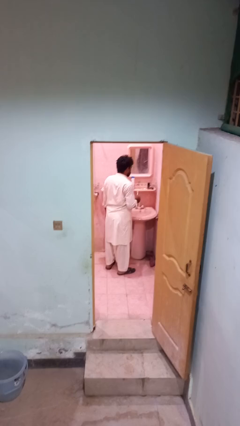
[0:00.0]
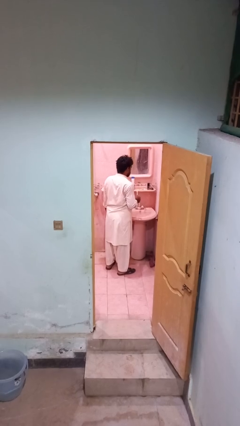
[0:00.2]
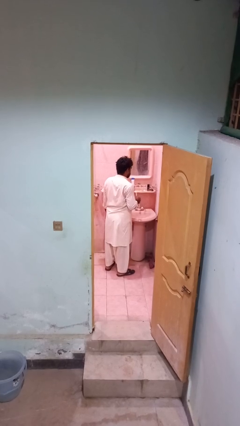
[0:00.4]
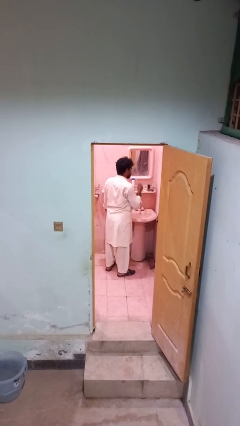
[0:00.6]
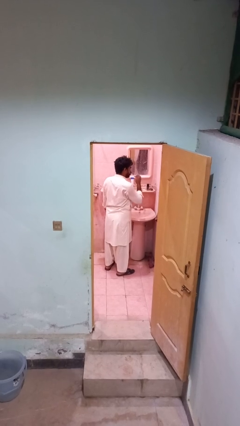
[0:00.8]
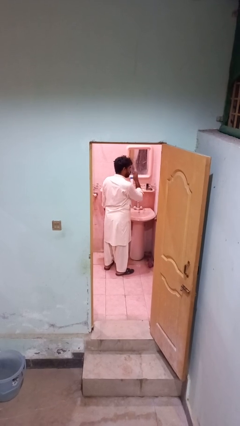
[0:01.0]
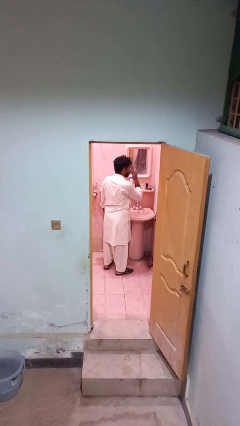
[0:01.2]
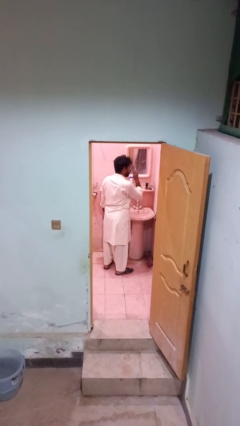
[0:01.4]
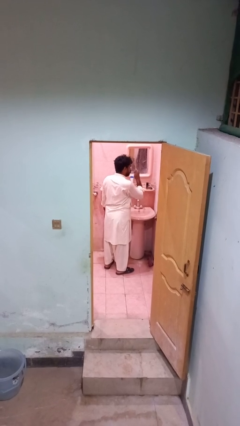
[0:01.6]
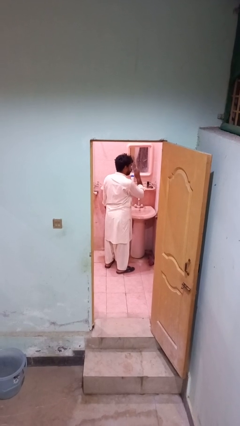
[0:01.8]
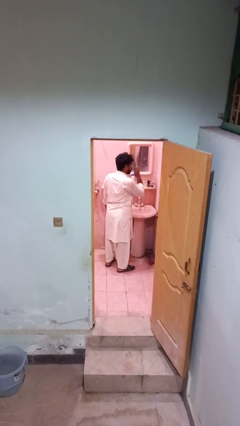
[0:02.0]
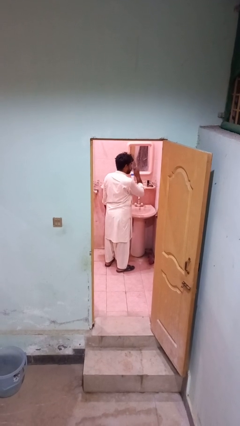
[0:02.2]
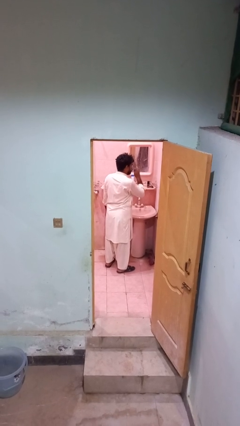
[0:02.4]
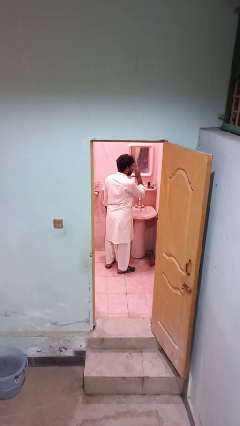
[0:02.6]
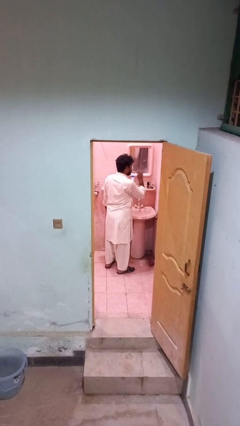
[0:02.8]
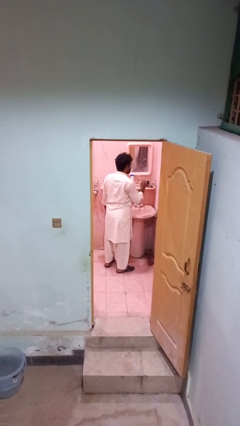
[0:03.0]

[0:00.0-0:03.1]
person brushes teeth

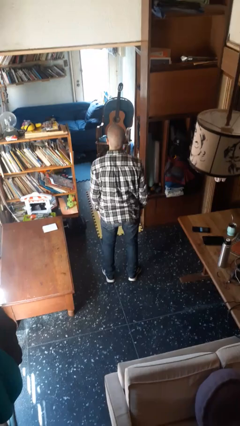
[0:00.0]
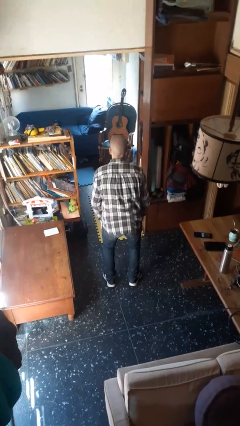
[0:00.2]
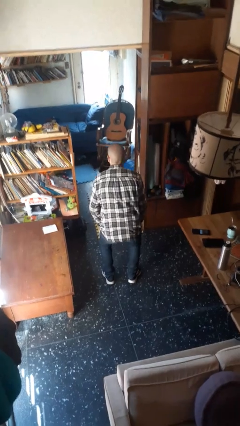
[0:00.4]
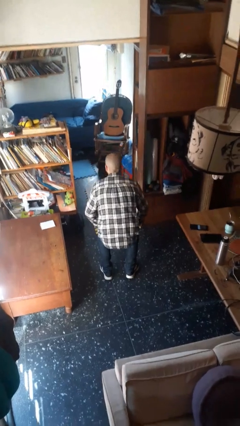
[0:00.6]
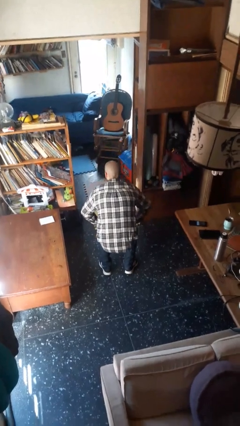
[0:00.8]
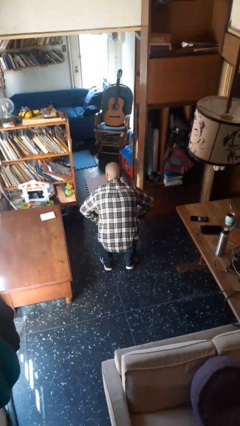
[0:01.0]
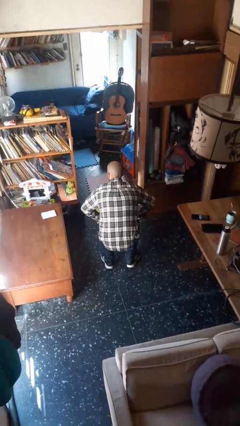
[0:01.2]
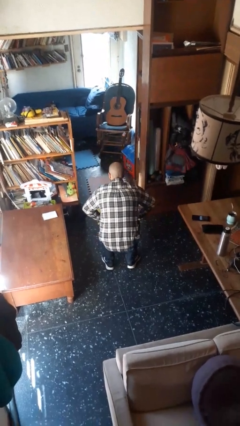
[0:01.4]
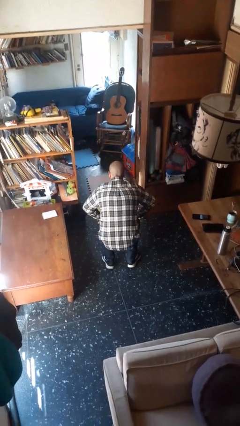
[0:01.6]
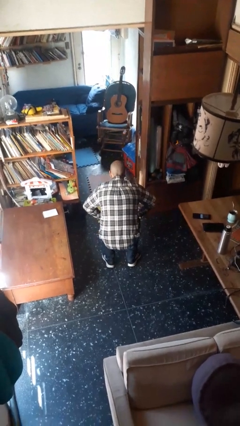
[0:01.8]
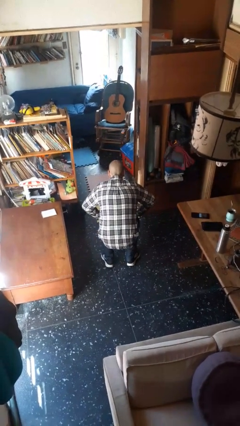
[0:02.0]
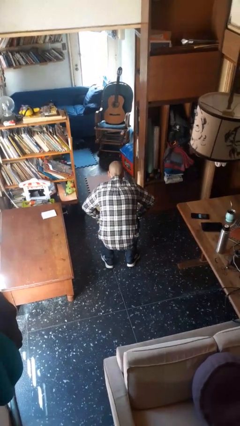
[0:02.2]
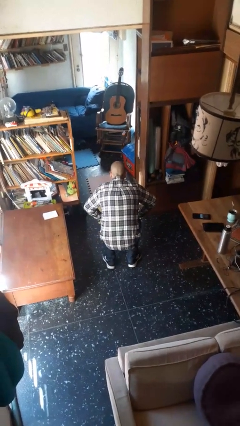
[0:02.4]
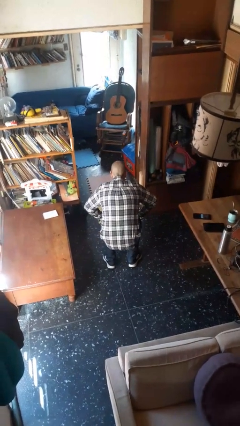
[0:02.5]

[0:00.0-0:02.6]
person squats

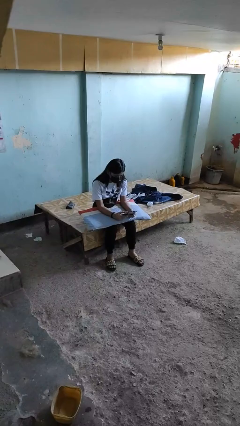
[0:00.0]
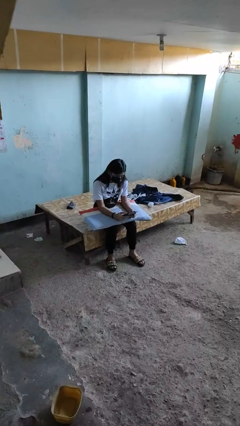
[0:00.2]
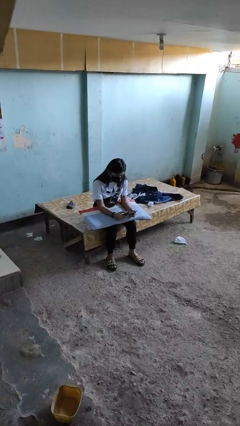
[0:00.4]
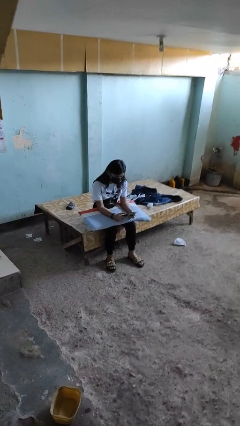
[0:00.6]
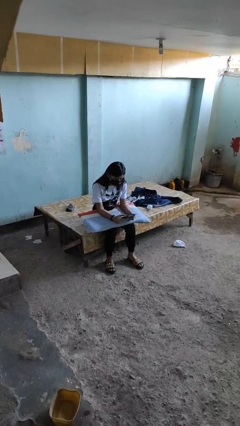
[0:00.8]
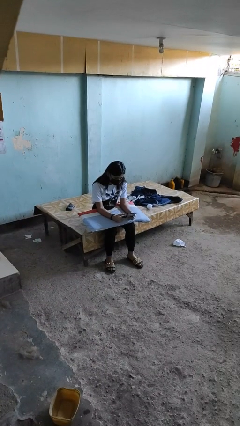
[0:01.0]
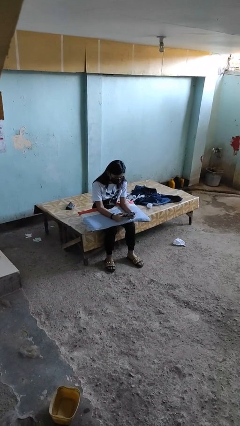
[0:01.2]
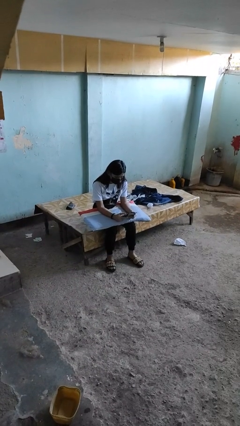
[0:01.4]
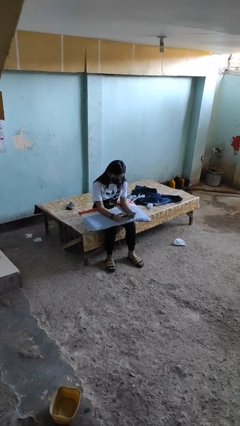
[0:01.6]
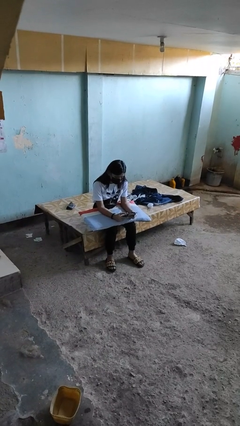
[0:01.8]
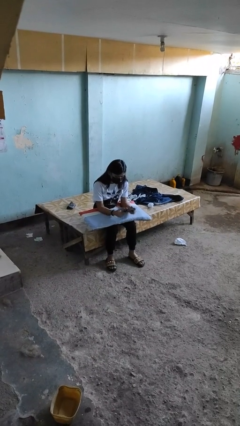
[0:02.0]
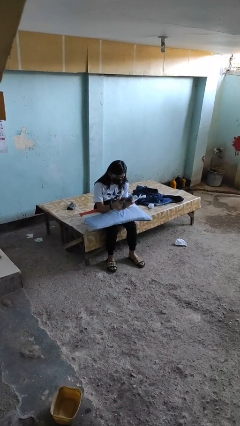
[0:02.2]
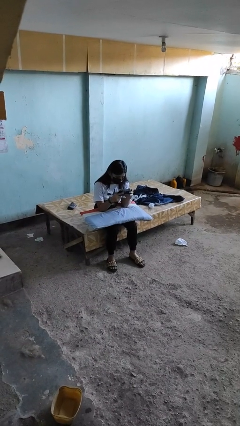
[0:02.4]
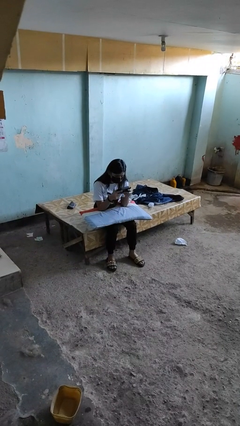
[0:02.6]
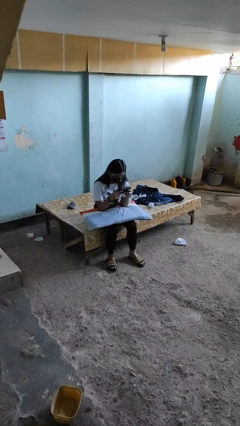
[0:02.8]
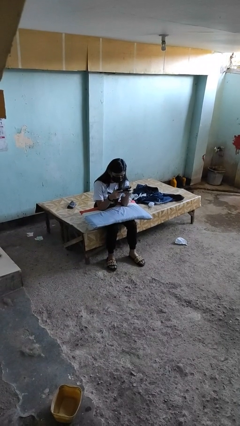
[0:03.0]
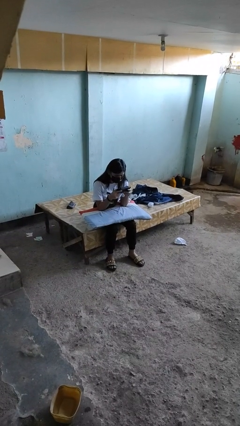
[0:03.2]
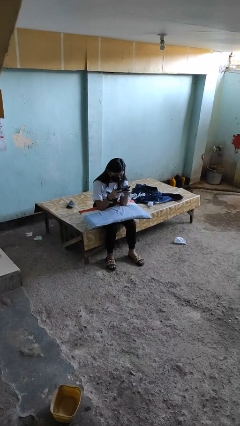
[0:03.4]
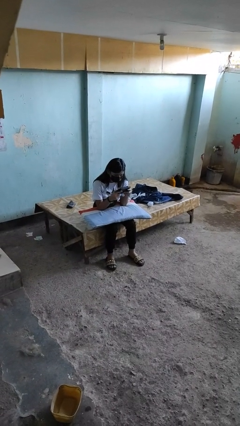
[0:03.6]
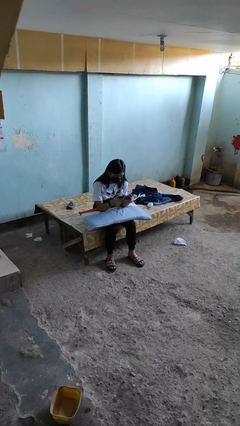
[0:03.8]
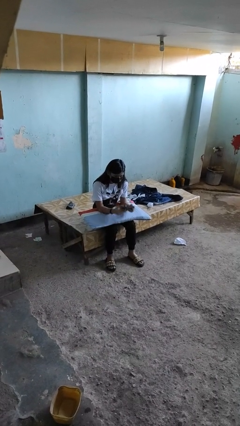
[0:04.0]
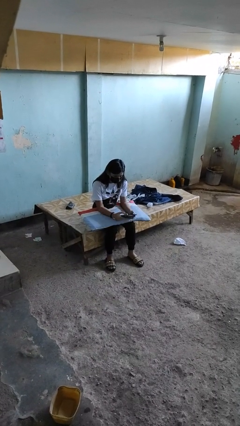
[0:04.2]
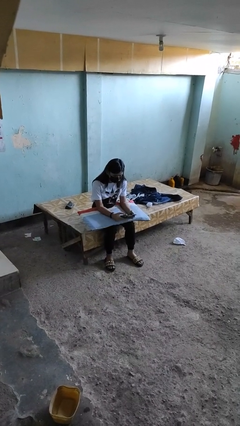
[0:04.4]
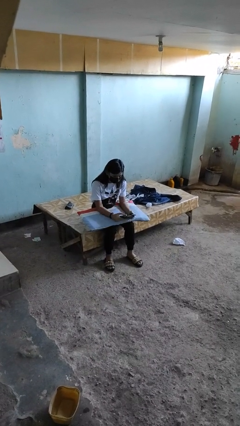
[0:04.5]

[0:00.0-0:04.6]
person interacts with handheld game

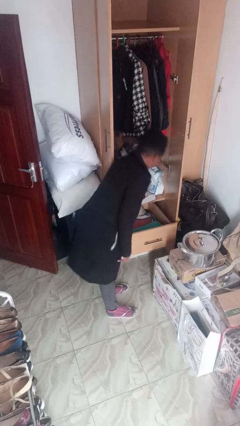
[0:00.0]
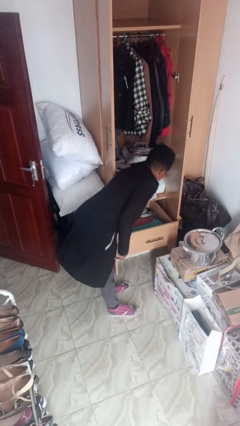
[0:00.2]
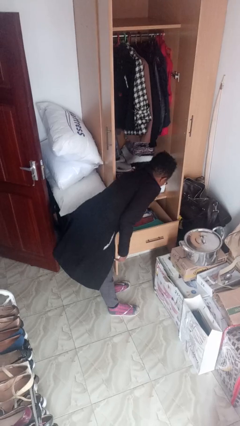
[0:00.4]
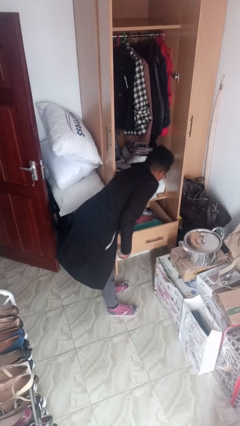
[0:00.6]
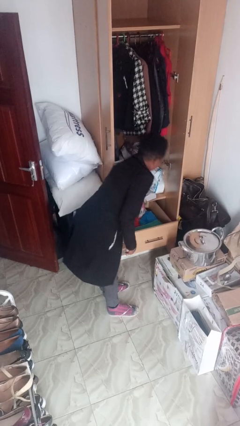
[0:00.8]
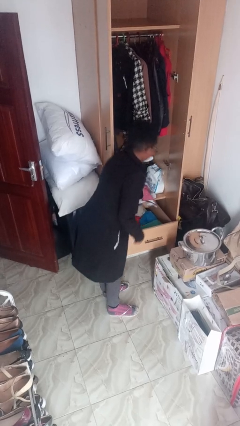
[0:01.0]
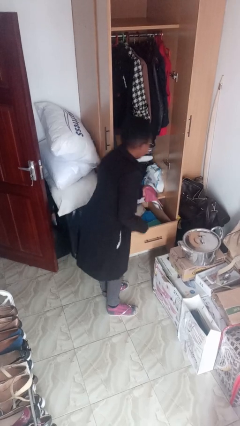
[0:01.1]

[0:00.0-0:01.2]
person takes clothes from dresser

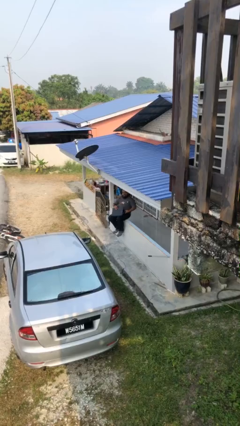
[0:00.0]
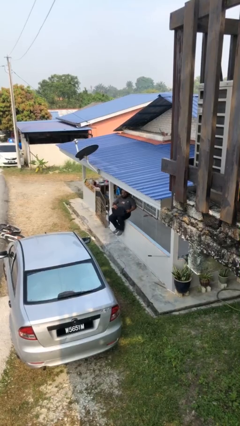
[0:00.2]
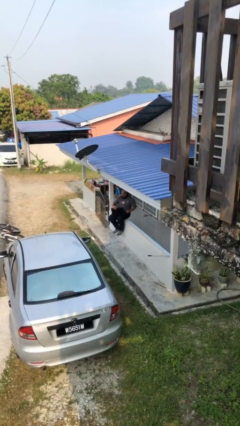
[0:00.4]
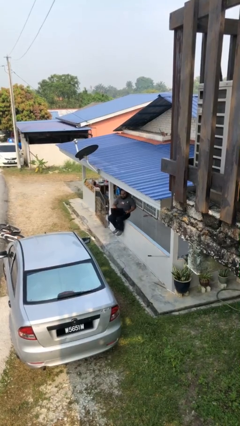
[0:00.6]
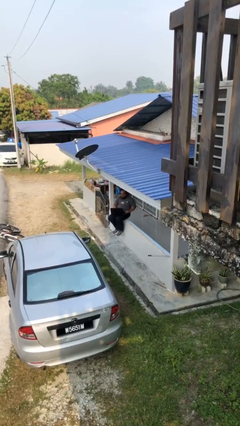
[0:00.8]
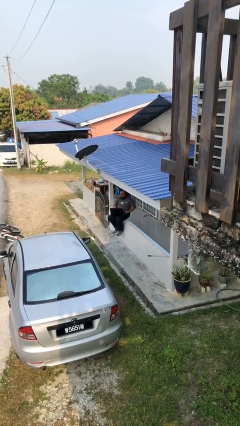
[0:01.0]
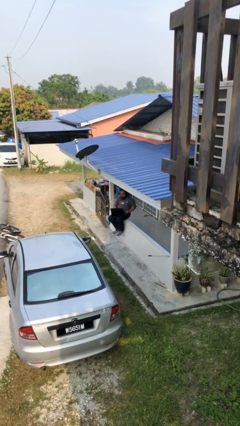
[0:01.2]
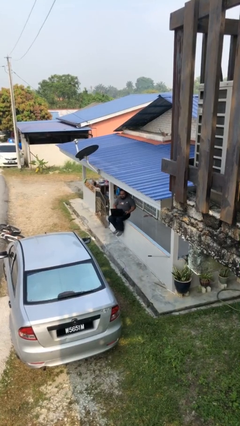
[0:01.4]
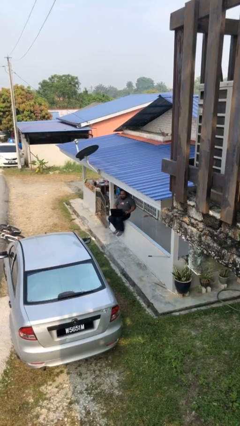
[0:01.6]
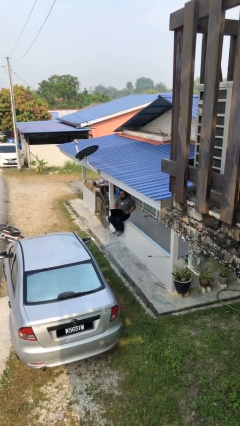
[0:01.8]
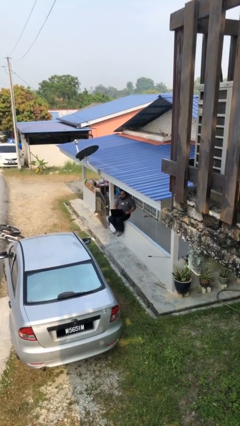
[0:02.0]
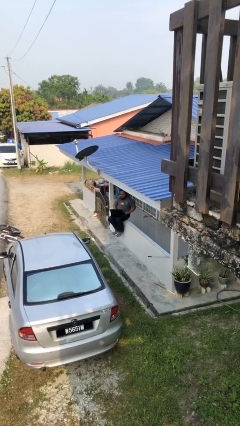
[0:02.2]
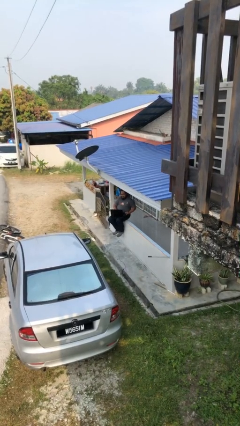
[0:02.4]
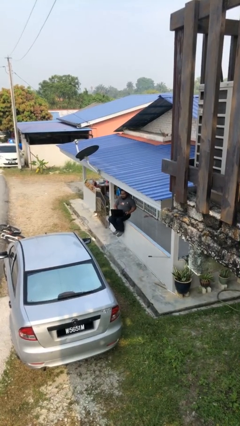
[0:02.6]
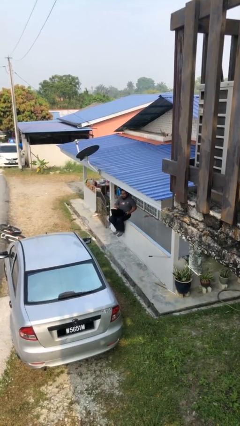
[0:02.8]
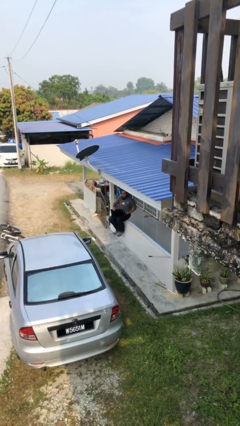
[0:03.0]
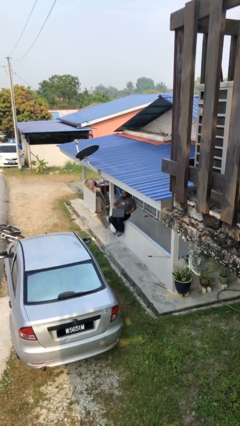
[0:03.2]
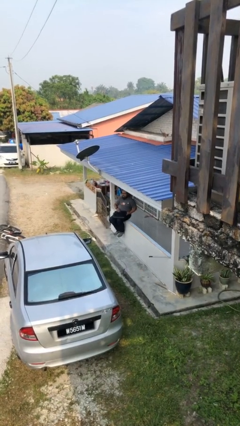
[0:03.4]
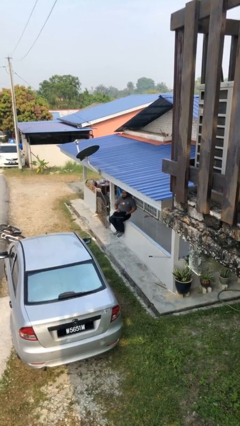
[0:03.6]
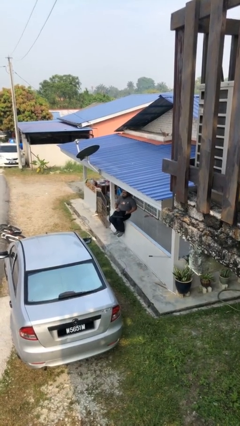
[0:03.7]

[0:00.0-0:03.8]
person interacts with laptop

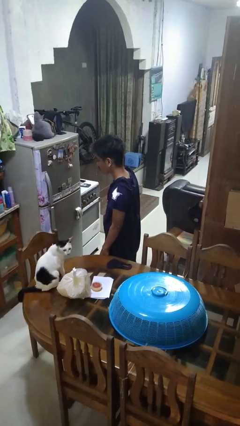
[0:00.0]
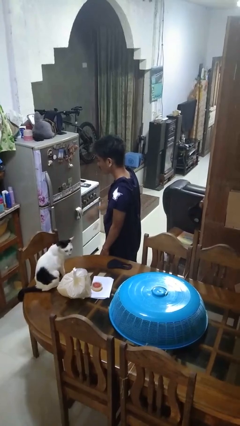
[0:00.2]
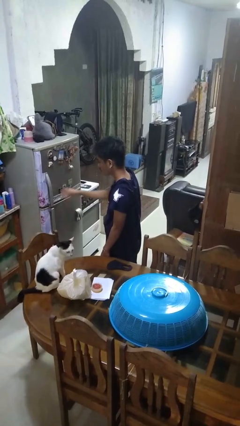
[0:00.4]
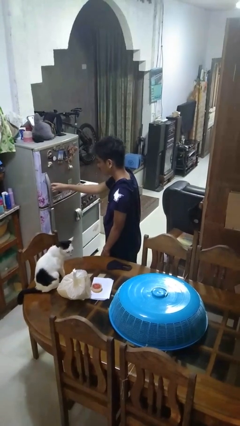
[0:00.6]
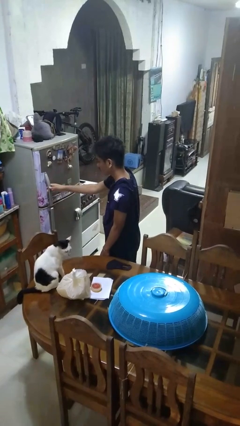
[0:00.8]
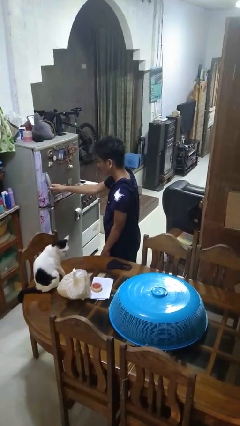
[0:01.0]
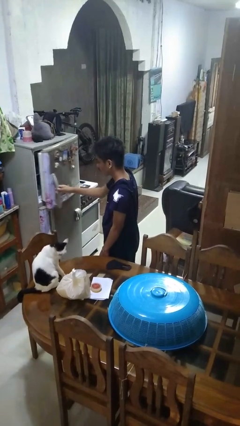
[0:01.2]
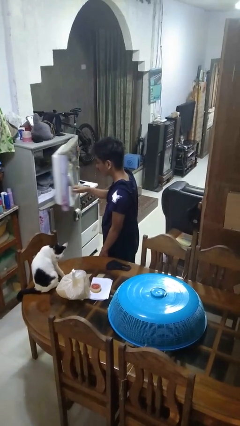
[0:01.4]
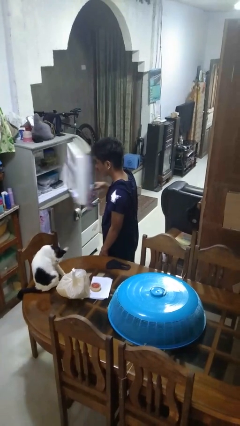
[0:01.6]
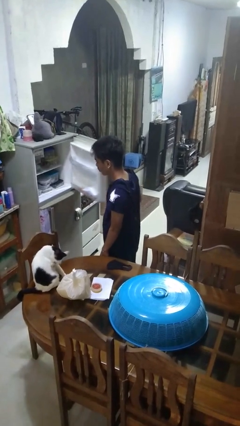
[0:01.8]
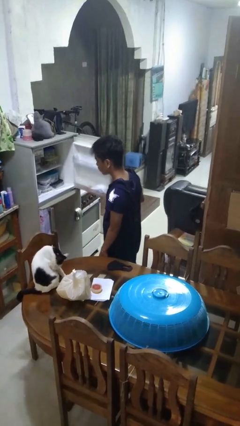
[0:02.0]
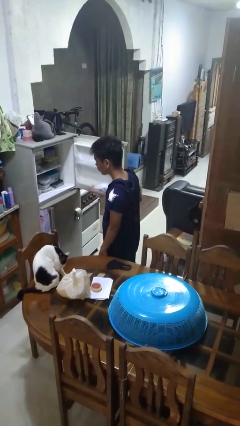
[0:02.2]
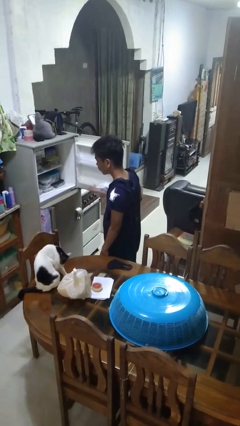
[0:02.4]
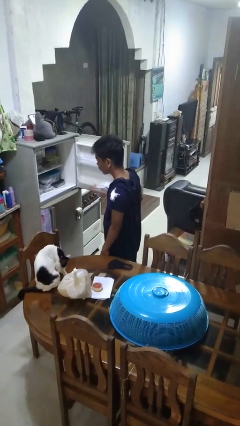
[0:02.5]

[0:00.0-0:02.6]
person opens refrigerator
